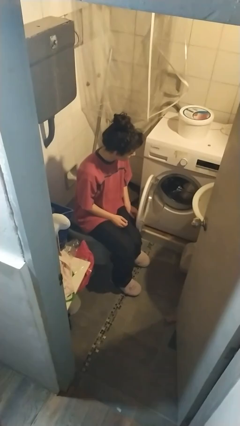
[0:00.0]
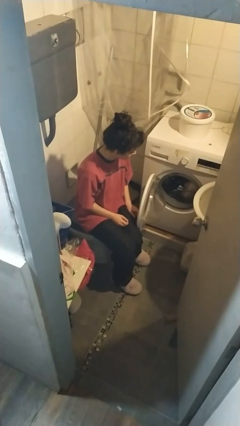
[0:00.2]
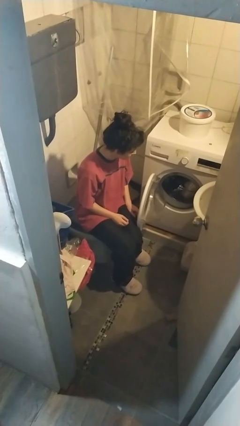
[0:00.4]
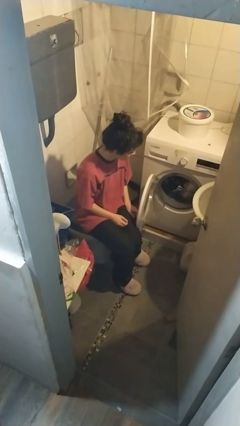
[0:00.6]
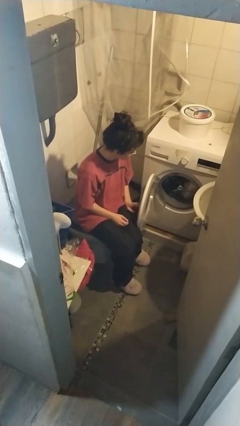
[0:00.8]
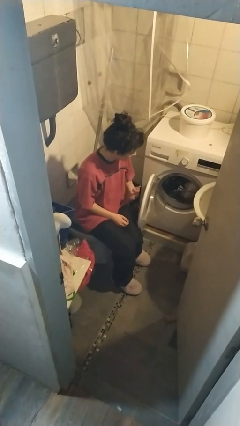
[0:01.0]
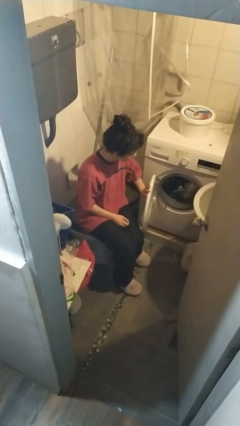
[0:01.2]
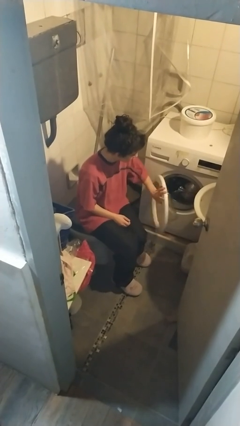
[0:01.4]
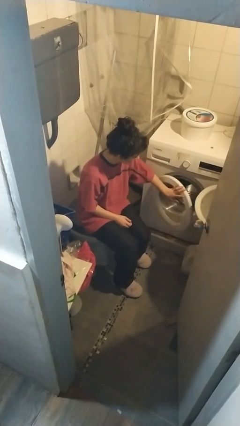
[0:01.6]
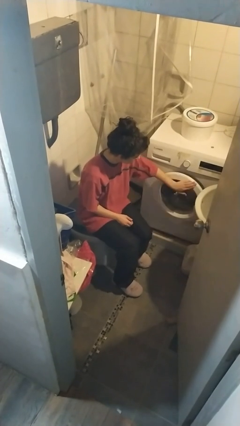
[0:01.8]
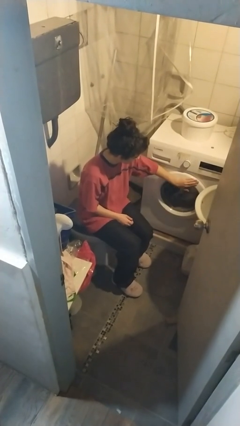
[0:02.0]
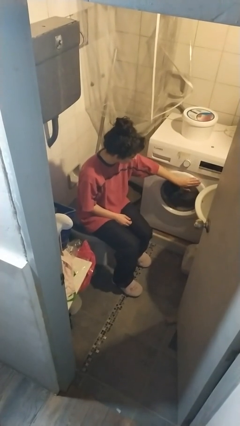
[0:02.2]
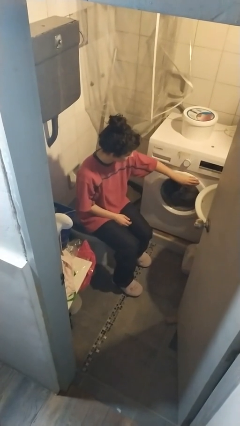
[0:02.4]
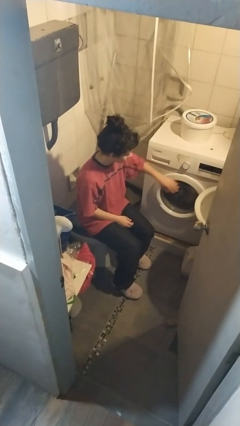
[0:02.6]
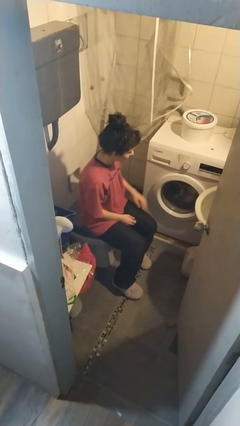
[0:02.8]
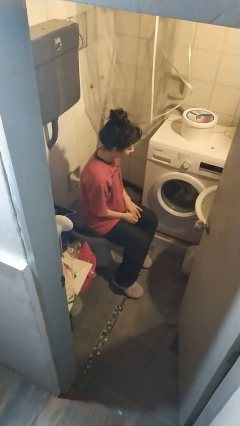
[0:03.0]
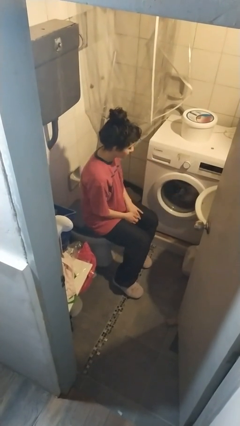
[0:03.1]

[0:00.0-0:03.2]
person closes clothes washer

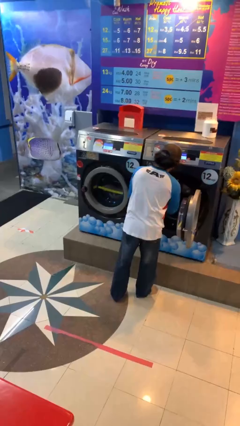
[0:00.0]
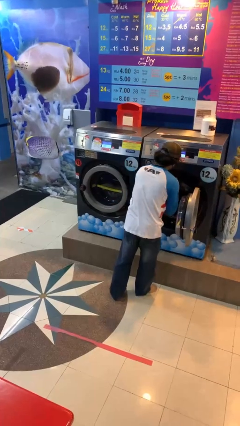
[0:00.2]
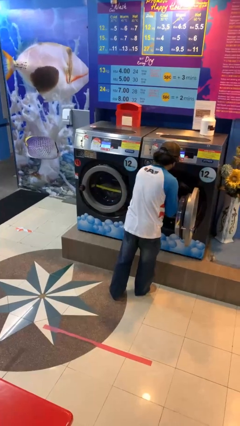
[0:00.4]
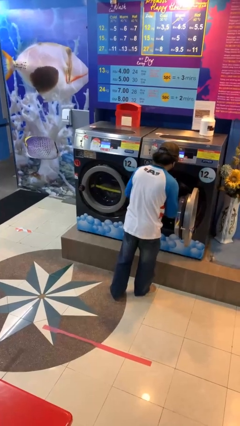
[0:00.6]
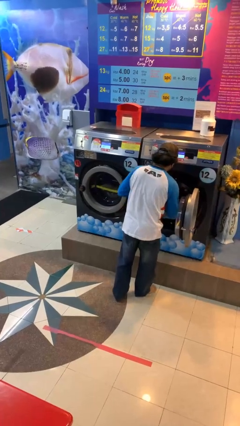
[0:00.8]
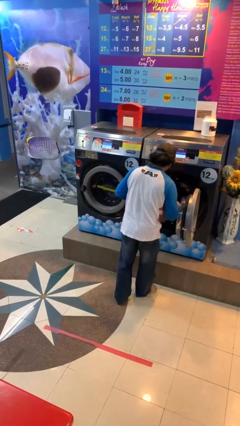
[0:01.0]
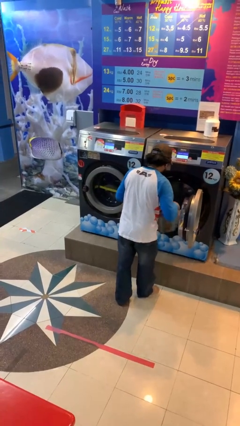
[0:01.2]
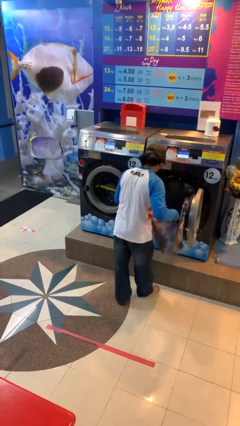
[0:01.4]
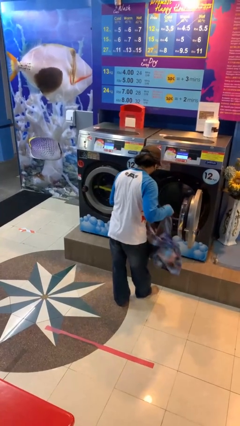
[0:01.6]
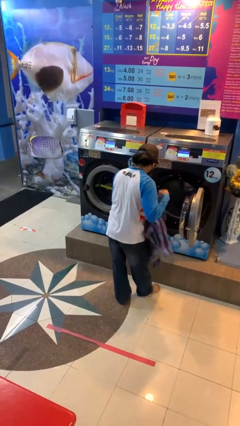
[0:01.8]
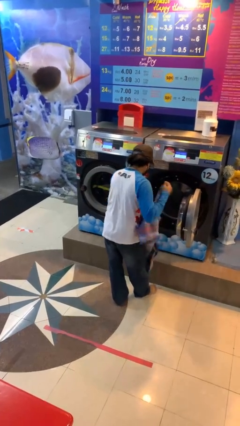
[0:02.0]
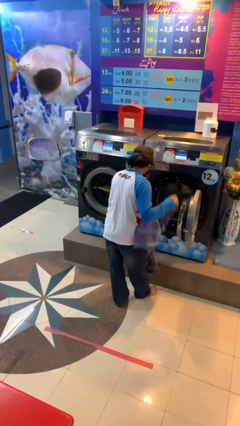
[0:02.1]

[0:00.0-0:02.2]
person unloads clotheswasher

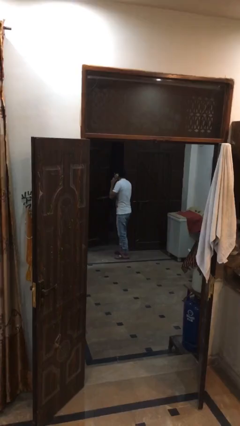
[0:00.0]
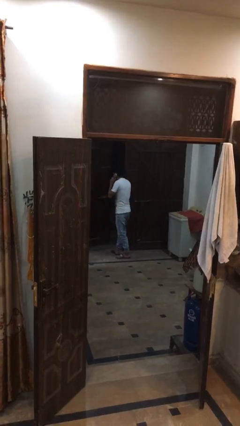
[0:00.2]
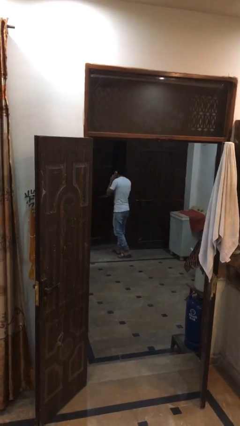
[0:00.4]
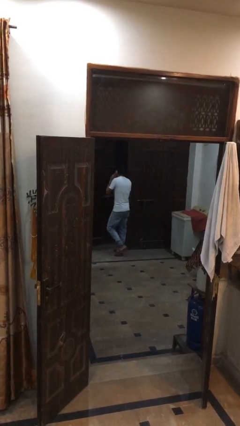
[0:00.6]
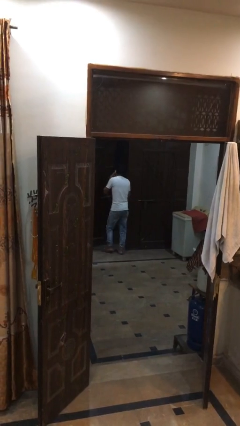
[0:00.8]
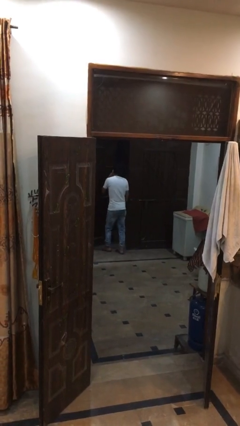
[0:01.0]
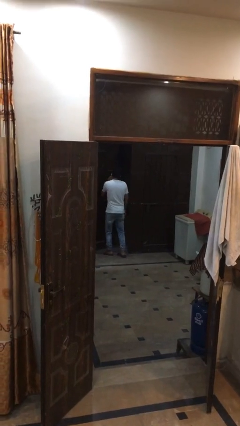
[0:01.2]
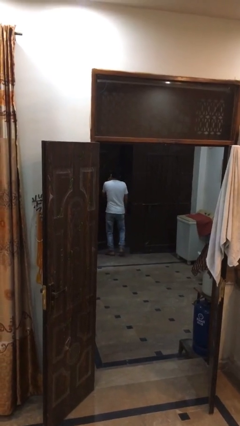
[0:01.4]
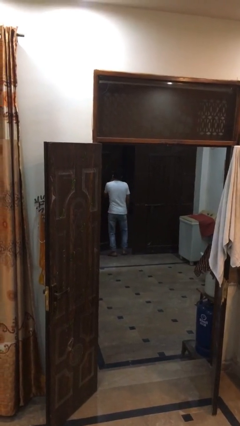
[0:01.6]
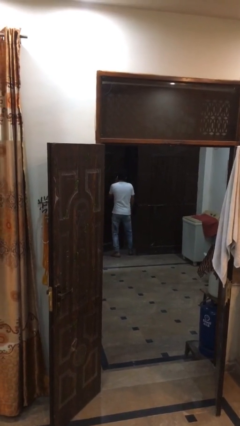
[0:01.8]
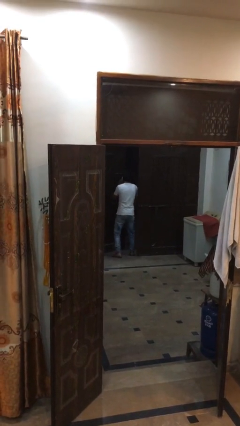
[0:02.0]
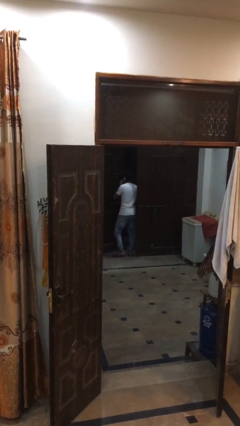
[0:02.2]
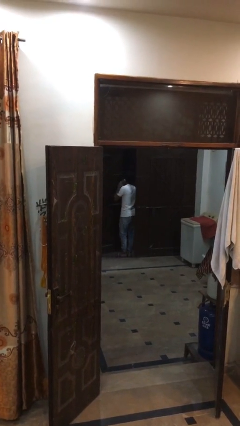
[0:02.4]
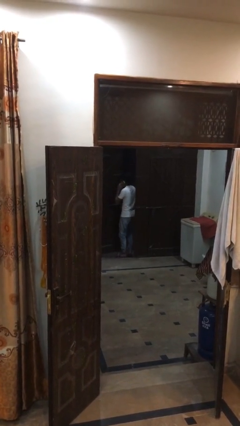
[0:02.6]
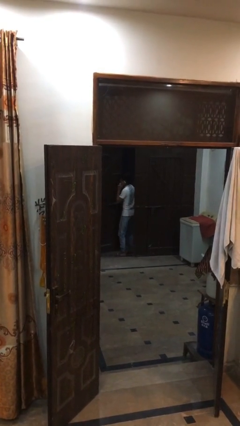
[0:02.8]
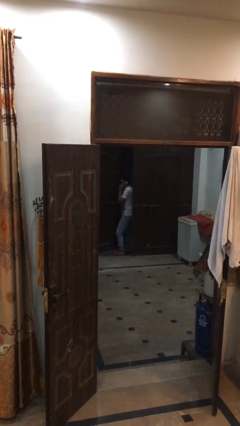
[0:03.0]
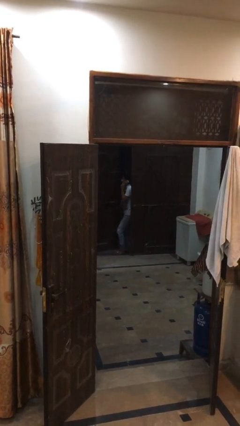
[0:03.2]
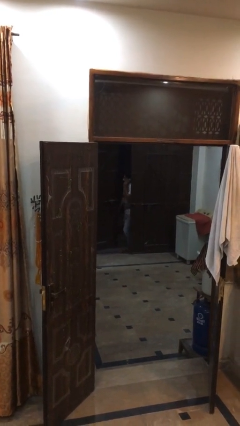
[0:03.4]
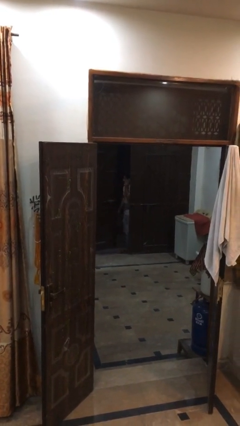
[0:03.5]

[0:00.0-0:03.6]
person exits scene through structure

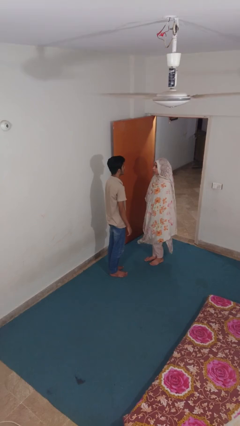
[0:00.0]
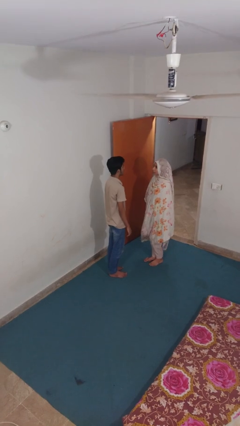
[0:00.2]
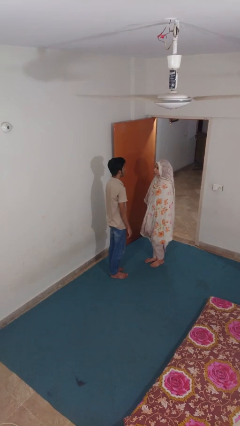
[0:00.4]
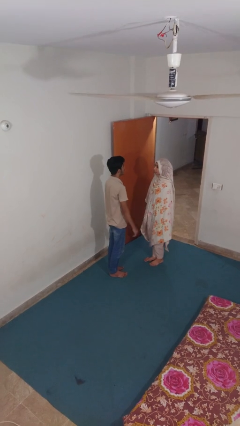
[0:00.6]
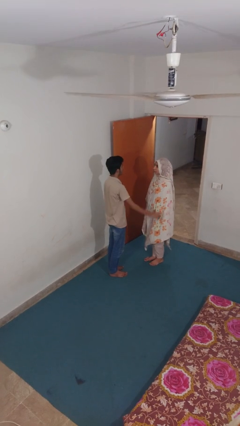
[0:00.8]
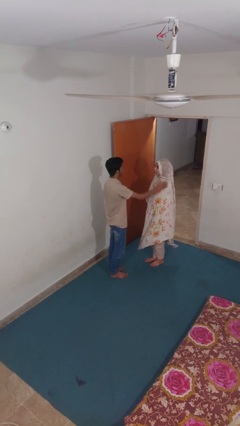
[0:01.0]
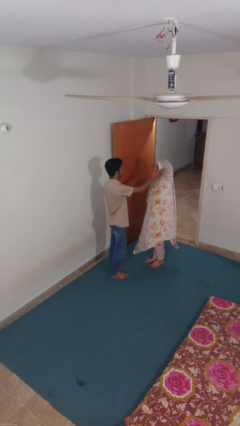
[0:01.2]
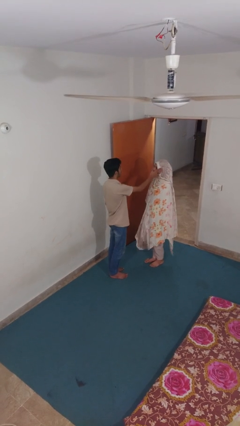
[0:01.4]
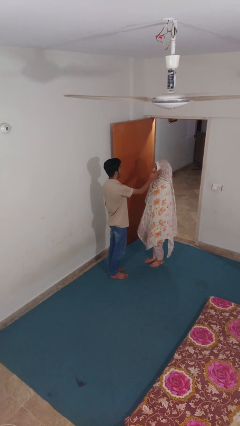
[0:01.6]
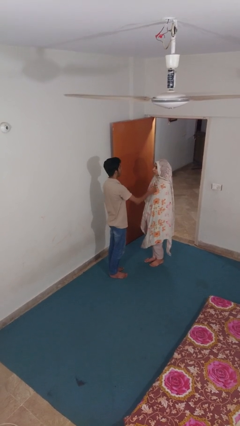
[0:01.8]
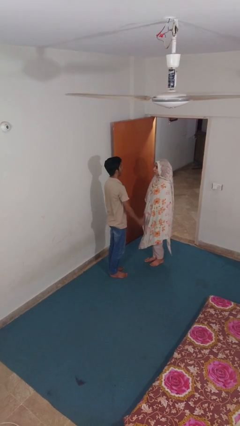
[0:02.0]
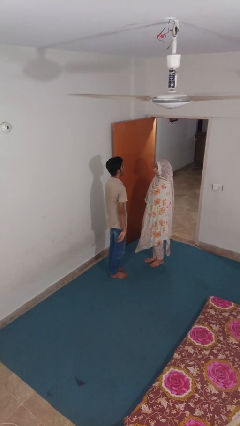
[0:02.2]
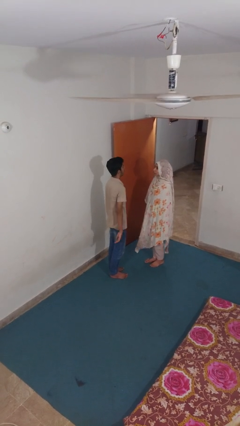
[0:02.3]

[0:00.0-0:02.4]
person touches face of person

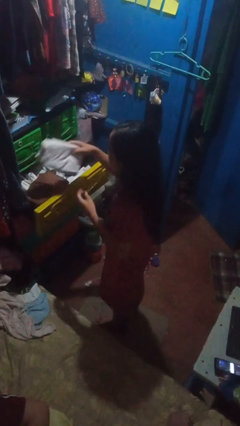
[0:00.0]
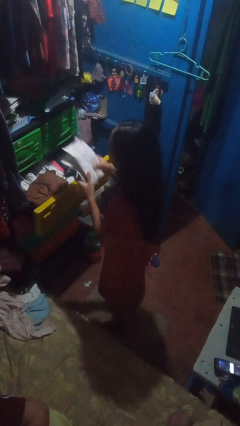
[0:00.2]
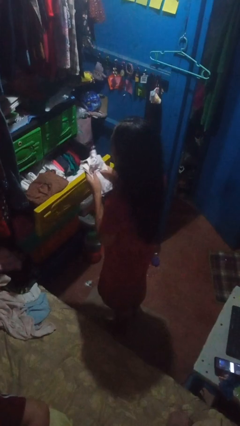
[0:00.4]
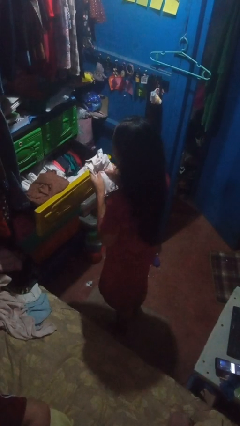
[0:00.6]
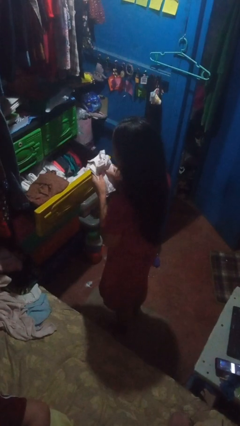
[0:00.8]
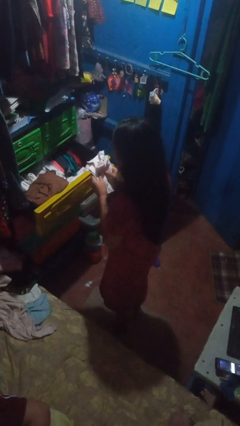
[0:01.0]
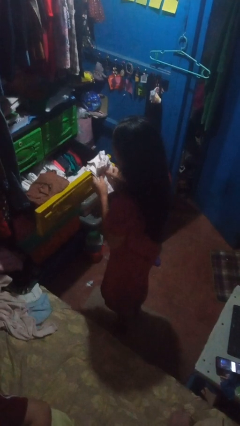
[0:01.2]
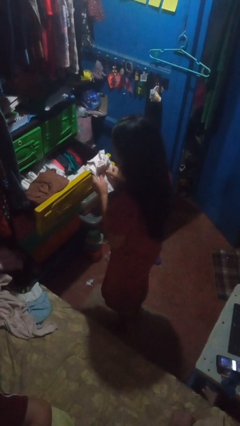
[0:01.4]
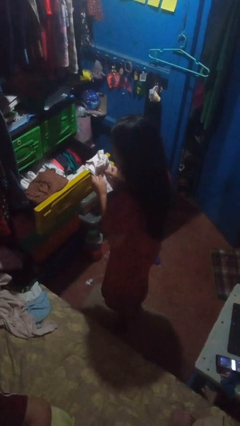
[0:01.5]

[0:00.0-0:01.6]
person takes clothes from dresser

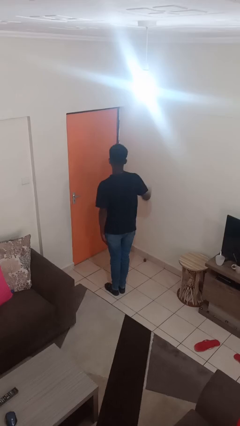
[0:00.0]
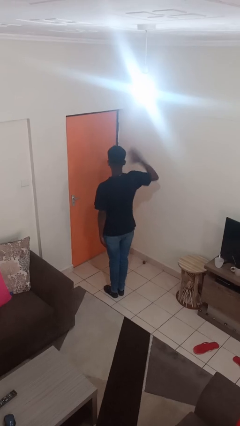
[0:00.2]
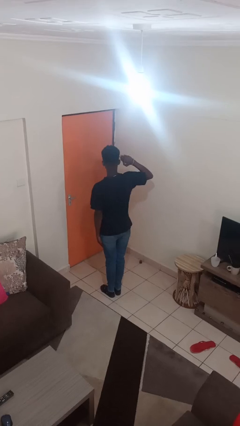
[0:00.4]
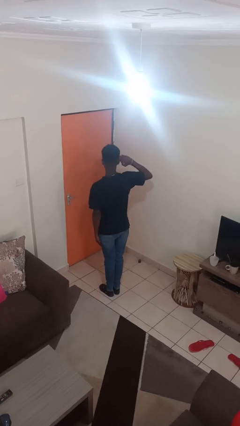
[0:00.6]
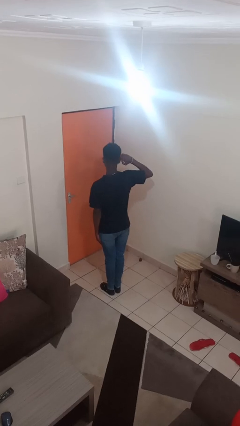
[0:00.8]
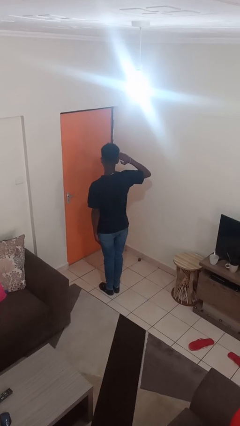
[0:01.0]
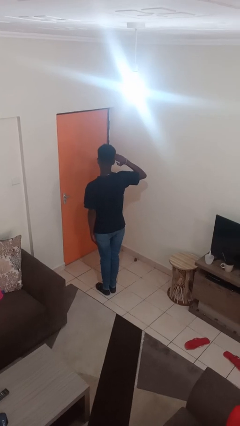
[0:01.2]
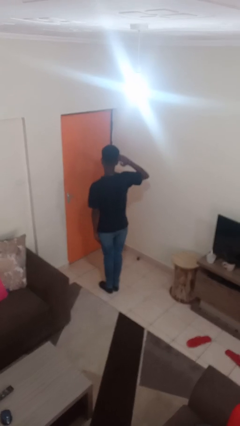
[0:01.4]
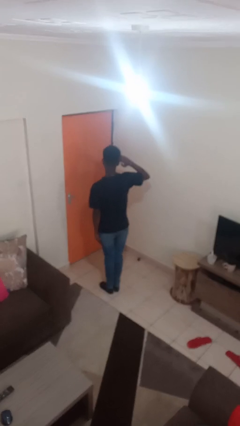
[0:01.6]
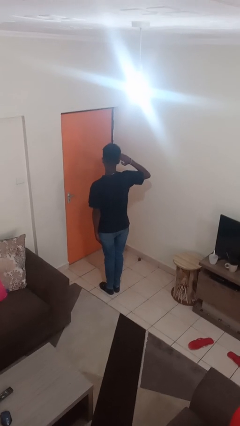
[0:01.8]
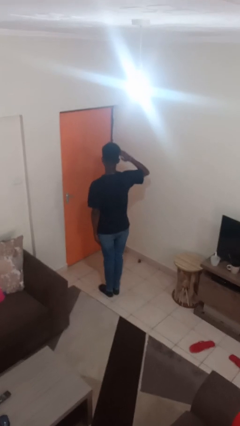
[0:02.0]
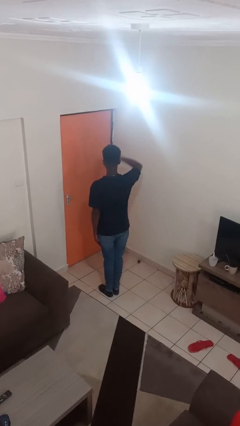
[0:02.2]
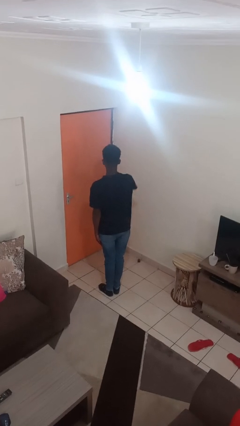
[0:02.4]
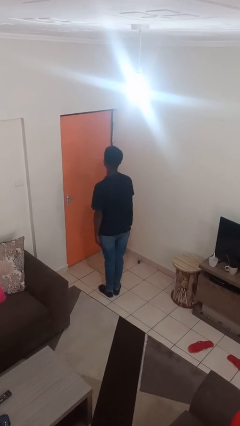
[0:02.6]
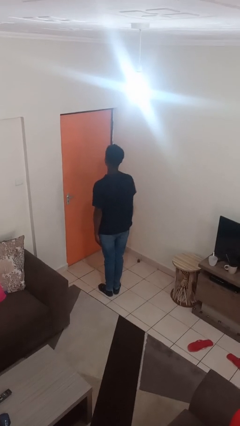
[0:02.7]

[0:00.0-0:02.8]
person salutes

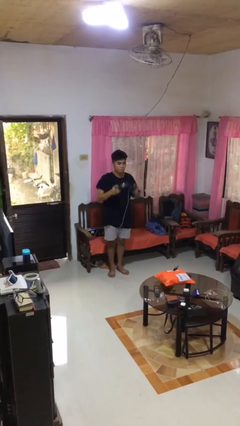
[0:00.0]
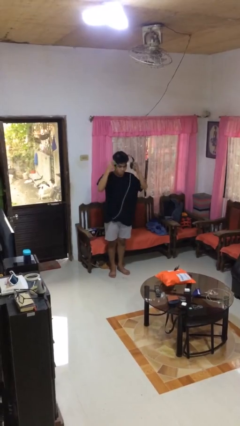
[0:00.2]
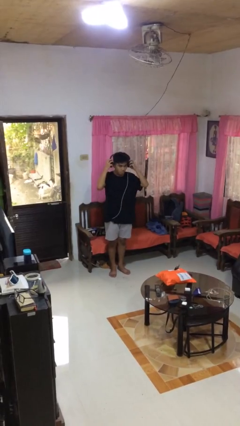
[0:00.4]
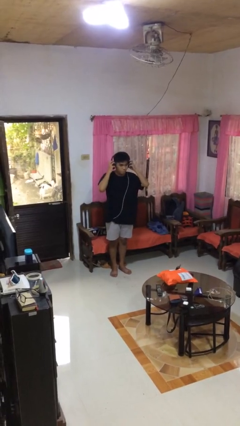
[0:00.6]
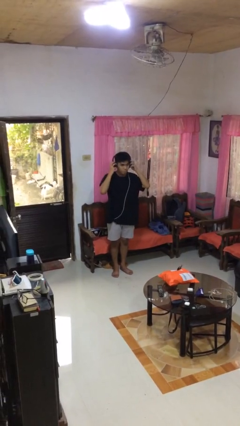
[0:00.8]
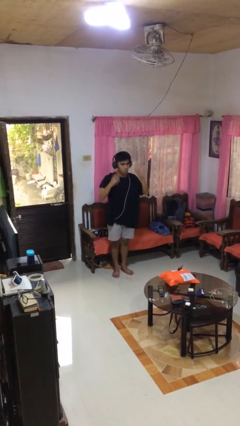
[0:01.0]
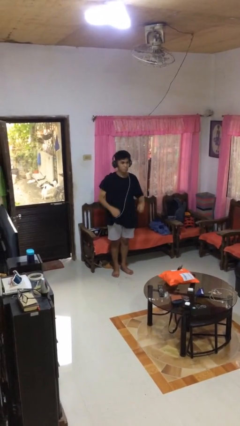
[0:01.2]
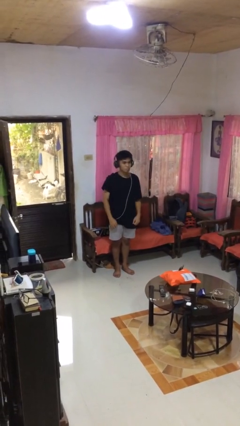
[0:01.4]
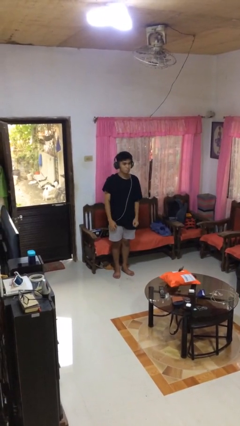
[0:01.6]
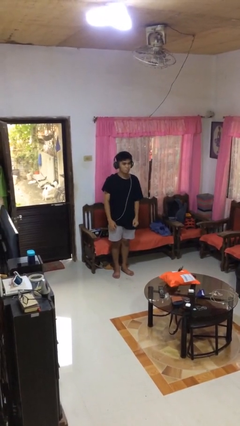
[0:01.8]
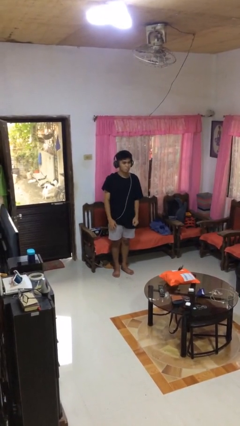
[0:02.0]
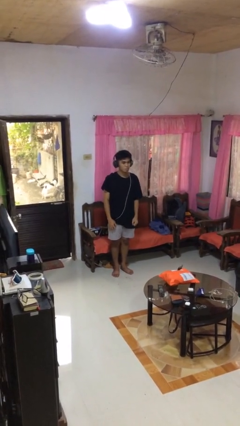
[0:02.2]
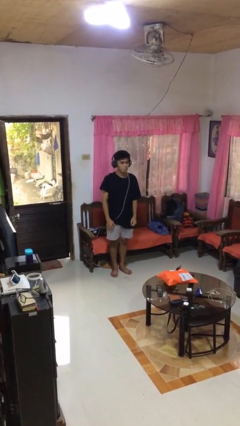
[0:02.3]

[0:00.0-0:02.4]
person puts on headphones
